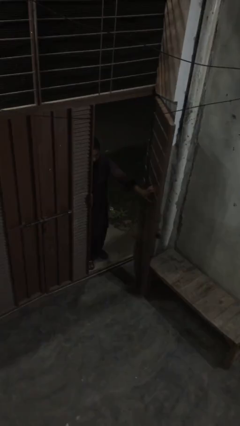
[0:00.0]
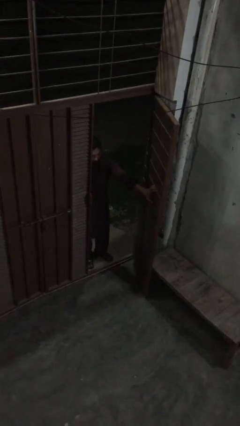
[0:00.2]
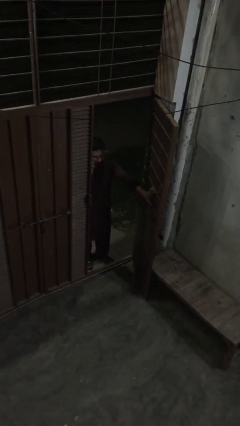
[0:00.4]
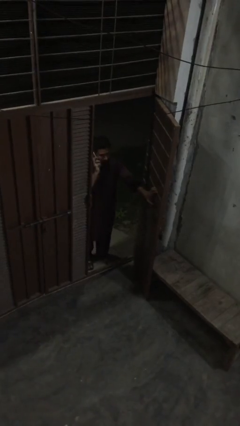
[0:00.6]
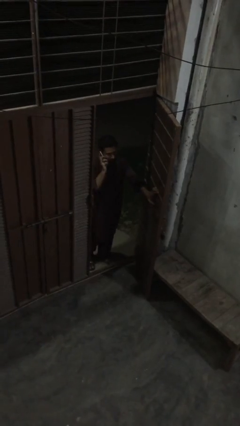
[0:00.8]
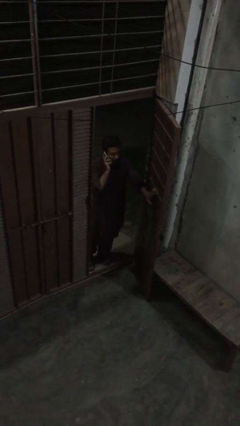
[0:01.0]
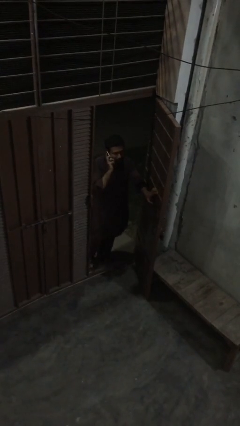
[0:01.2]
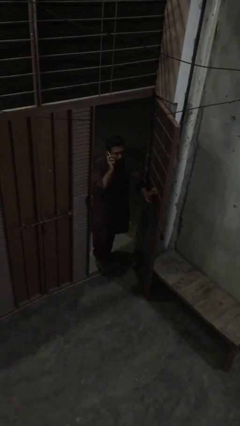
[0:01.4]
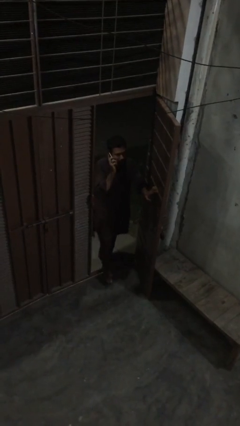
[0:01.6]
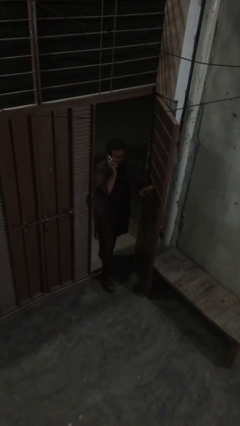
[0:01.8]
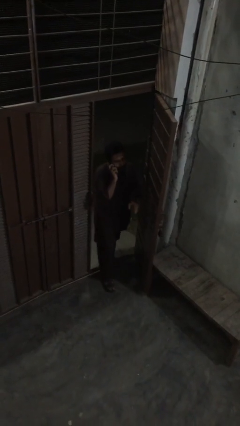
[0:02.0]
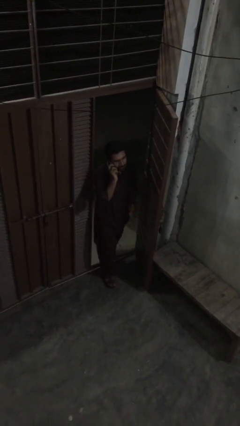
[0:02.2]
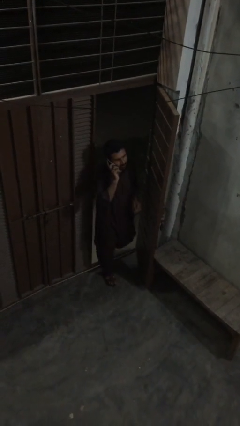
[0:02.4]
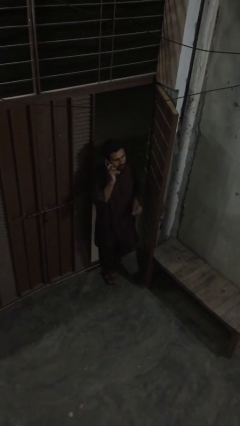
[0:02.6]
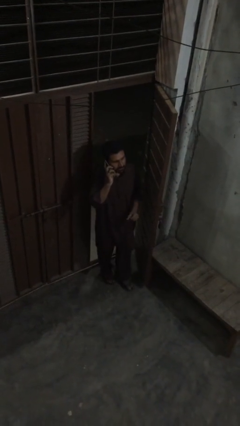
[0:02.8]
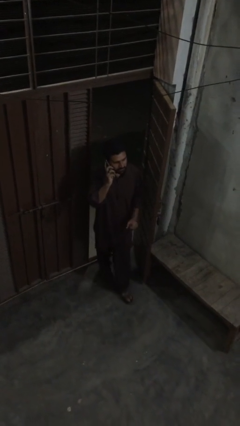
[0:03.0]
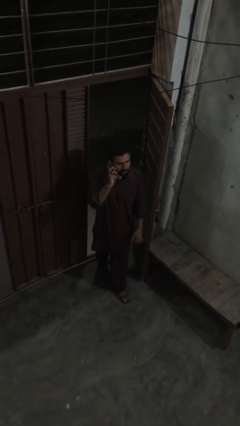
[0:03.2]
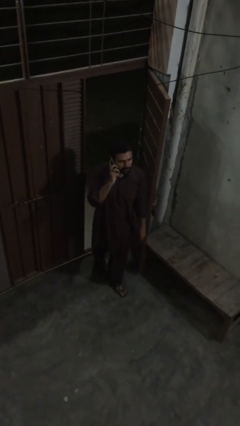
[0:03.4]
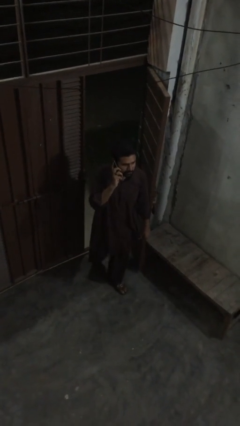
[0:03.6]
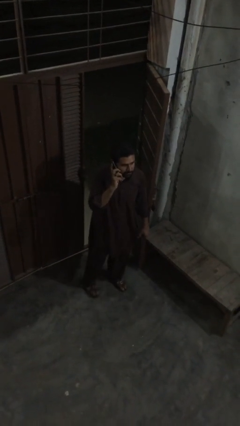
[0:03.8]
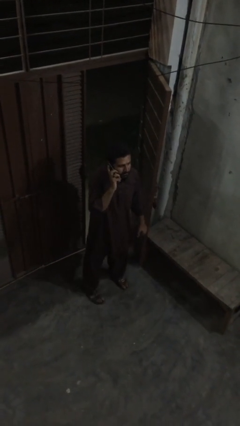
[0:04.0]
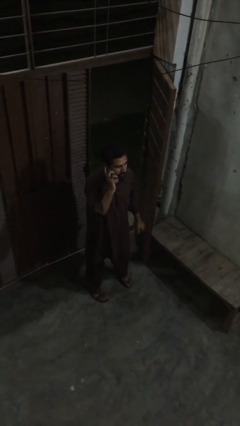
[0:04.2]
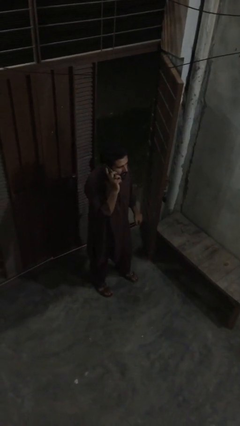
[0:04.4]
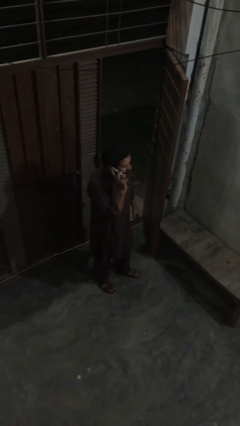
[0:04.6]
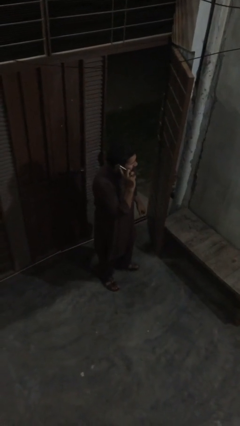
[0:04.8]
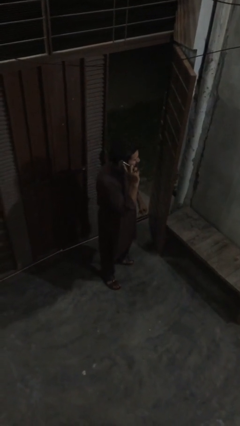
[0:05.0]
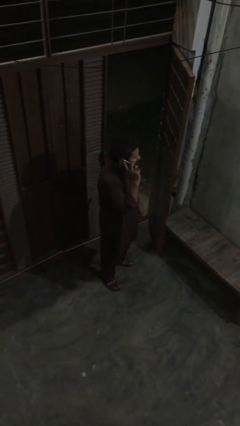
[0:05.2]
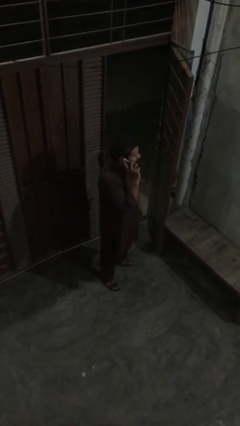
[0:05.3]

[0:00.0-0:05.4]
person enters scene through structure

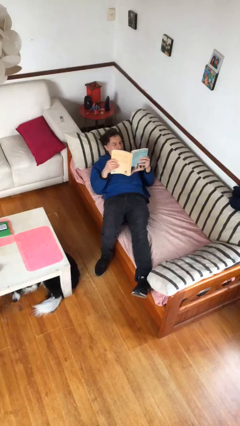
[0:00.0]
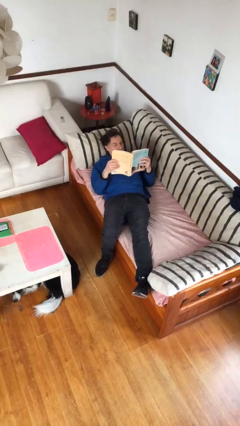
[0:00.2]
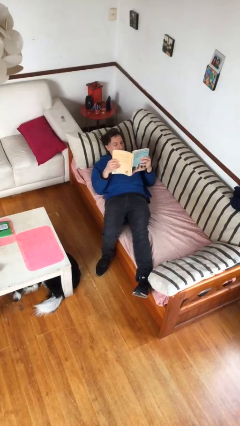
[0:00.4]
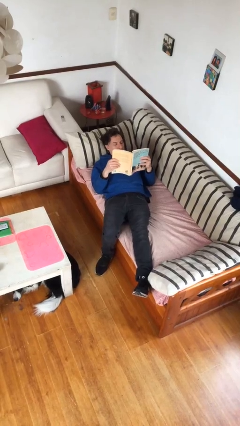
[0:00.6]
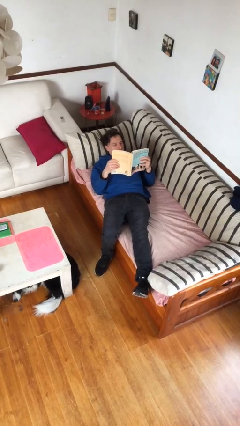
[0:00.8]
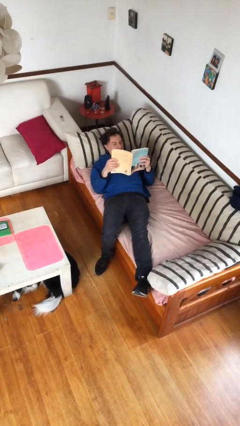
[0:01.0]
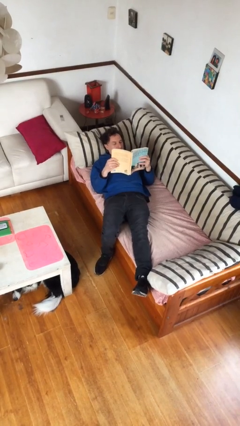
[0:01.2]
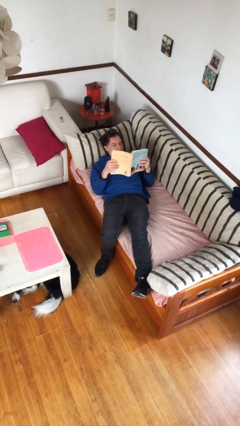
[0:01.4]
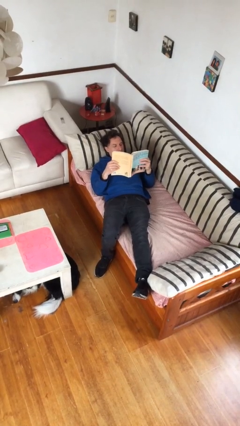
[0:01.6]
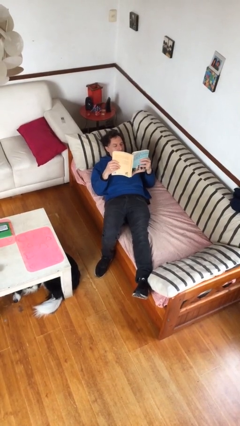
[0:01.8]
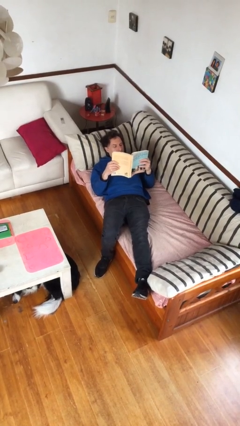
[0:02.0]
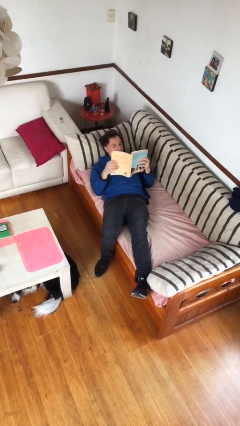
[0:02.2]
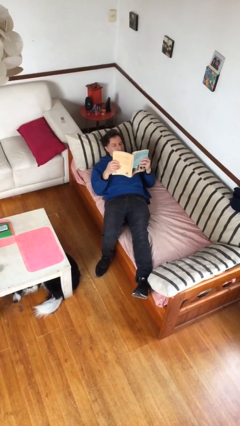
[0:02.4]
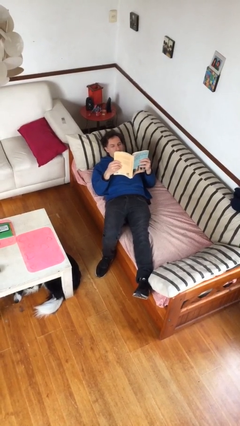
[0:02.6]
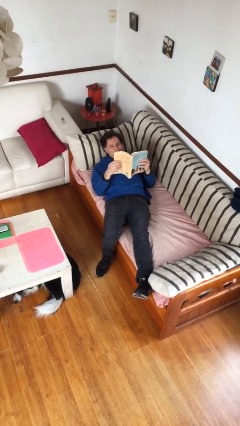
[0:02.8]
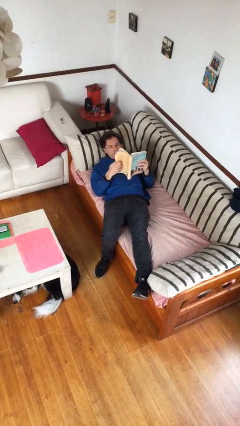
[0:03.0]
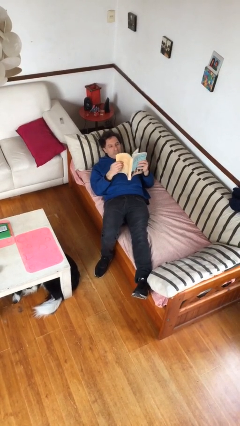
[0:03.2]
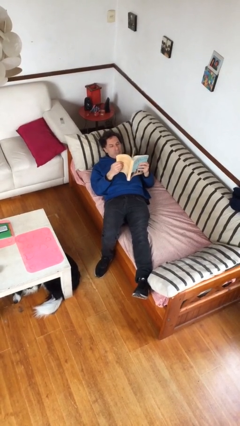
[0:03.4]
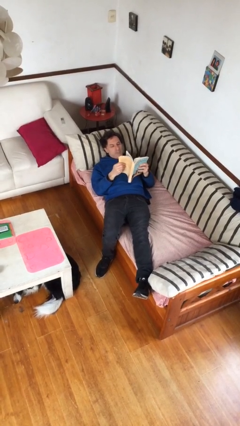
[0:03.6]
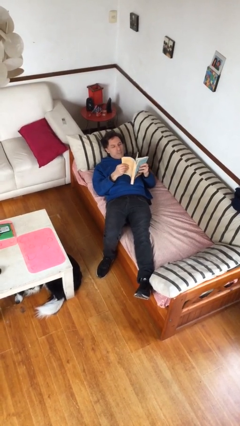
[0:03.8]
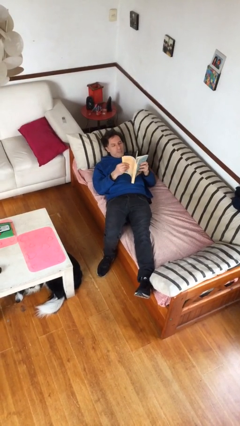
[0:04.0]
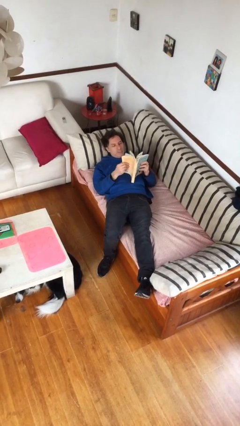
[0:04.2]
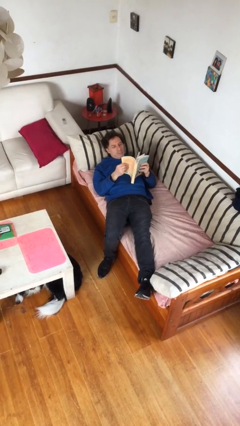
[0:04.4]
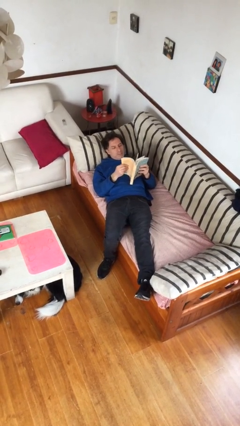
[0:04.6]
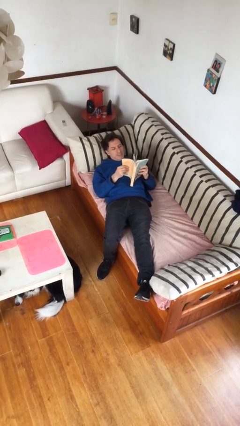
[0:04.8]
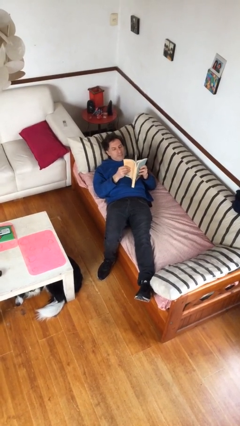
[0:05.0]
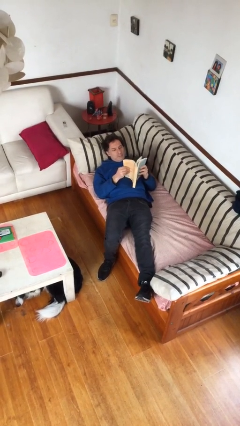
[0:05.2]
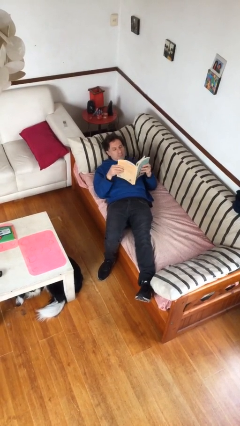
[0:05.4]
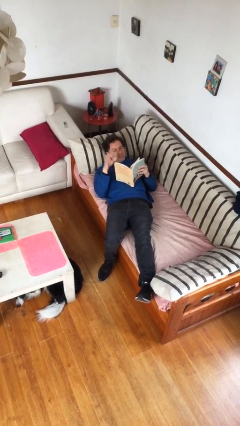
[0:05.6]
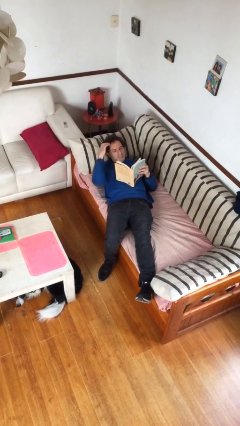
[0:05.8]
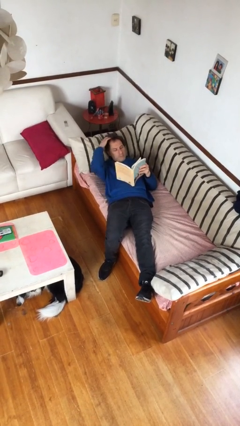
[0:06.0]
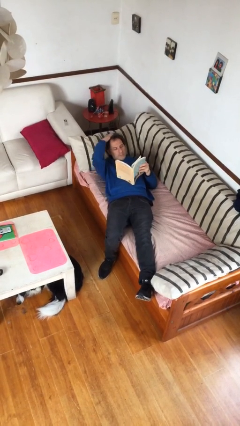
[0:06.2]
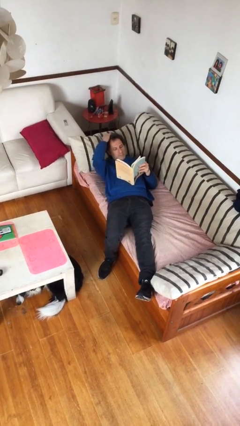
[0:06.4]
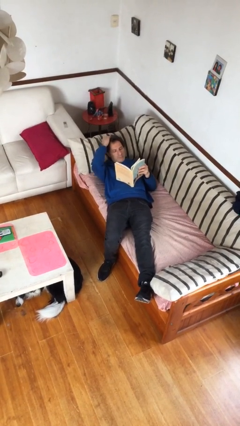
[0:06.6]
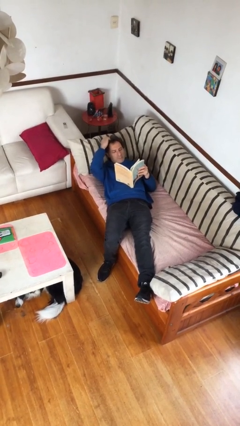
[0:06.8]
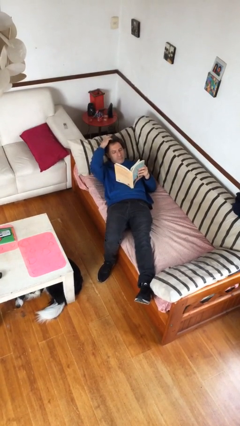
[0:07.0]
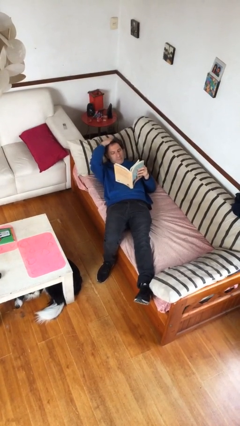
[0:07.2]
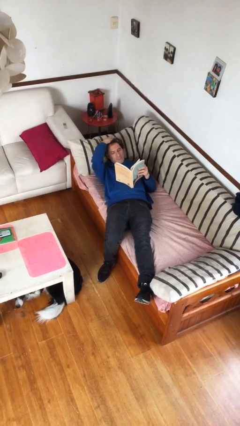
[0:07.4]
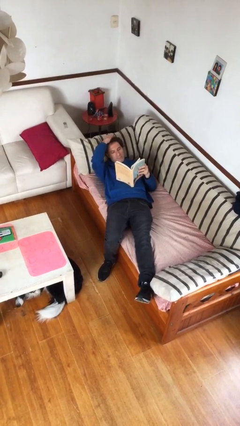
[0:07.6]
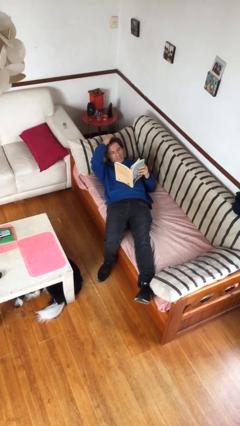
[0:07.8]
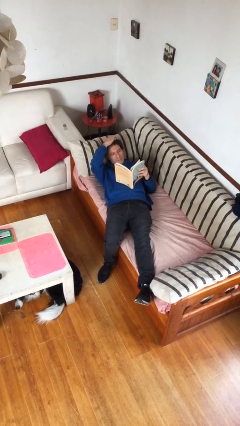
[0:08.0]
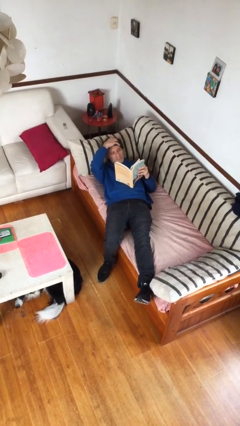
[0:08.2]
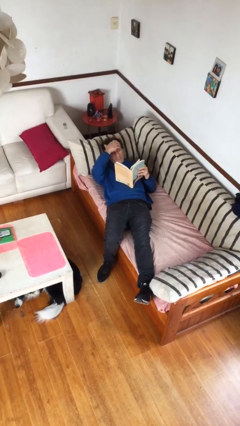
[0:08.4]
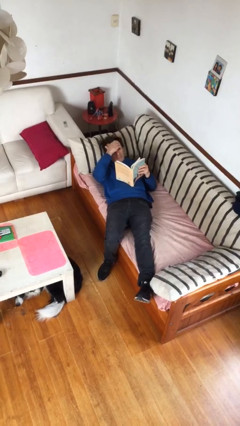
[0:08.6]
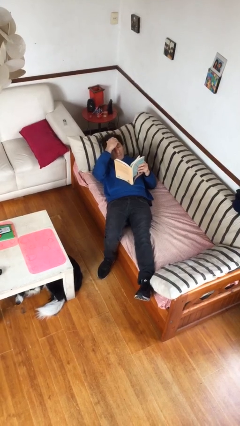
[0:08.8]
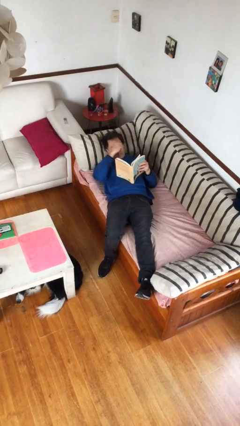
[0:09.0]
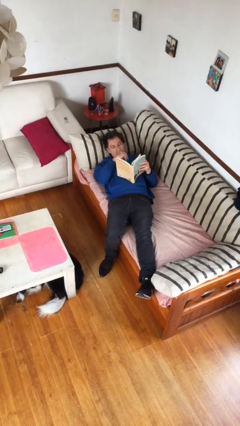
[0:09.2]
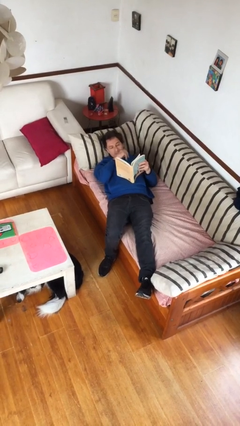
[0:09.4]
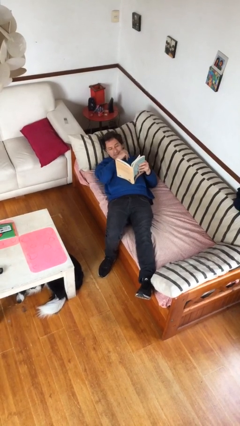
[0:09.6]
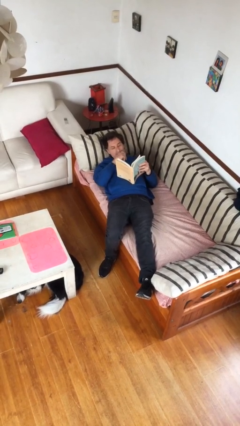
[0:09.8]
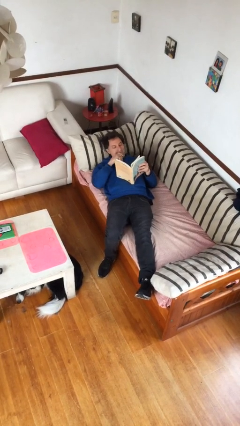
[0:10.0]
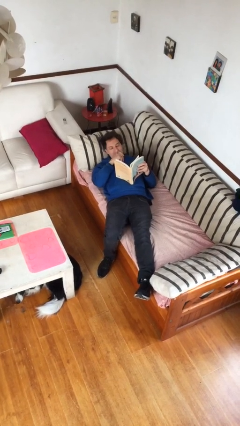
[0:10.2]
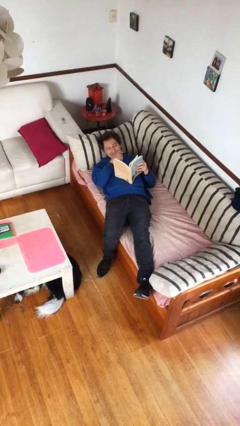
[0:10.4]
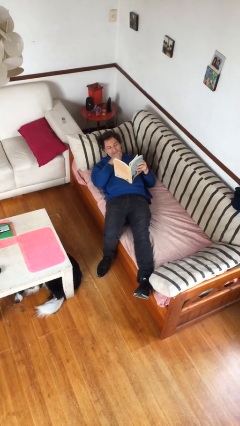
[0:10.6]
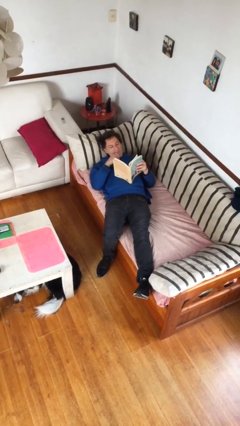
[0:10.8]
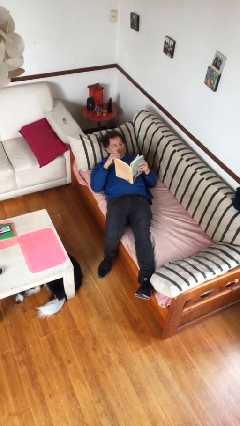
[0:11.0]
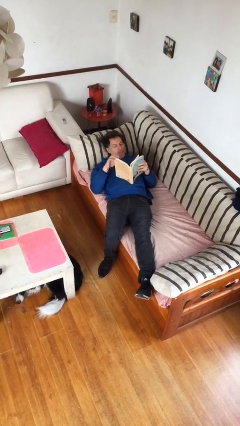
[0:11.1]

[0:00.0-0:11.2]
person reads document

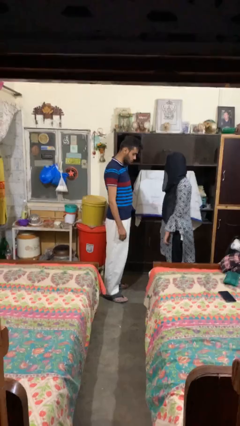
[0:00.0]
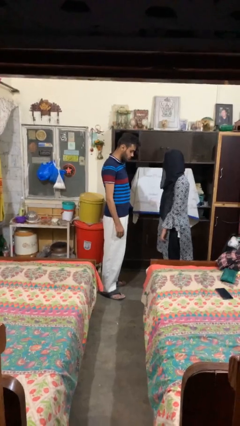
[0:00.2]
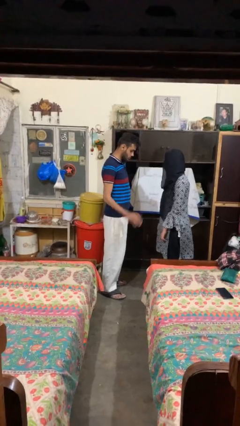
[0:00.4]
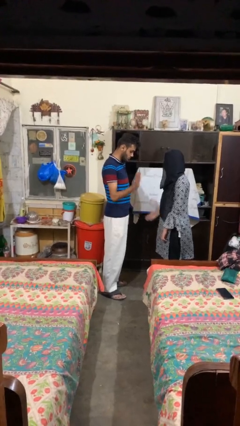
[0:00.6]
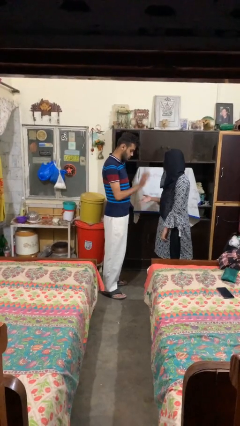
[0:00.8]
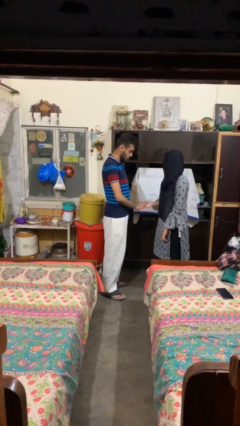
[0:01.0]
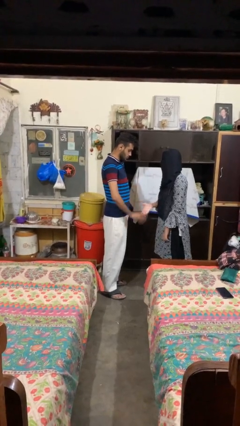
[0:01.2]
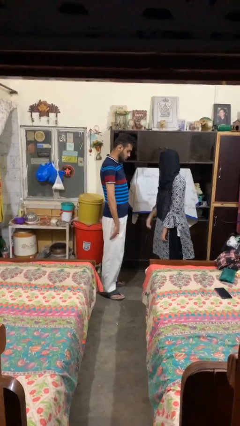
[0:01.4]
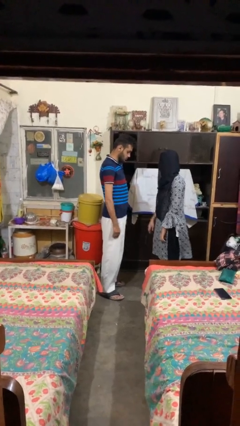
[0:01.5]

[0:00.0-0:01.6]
person highfives hand
